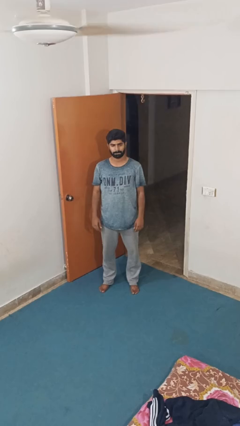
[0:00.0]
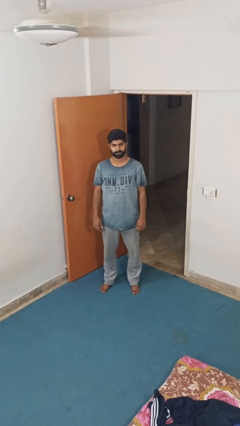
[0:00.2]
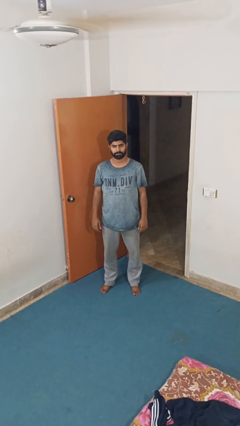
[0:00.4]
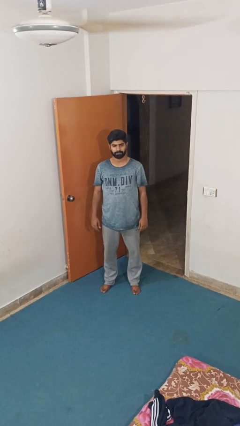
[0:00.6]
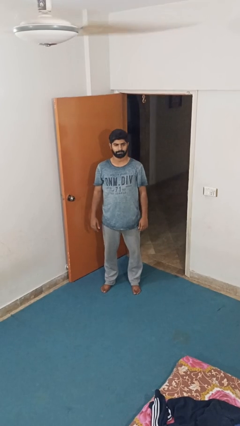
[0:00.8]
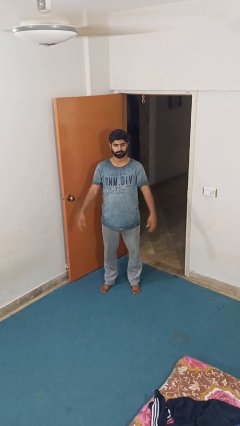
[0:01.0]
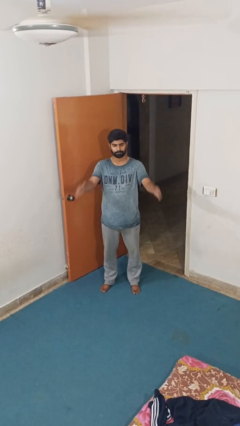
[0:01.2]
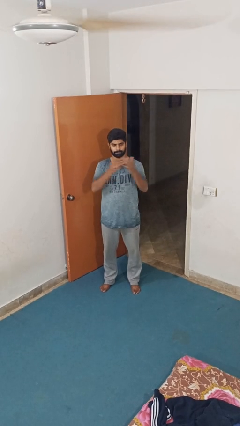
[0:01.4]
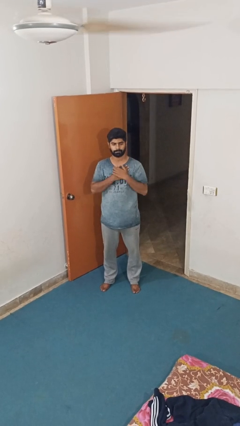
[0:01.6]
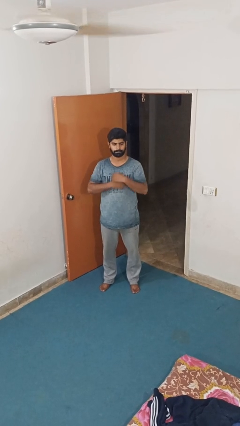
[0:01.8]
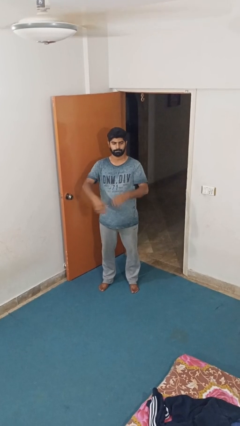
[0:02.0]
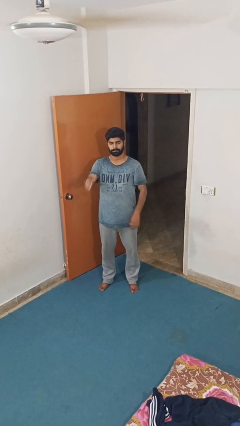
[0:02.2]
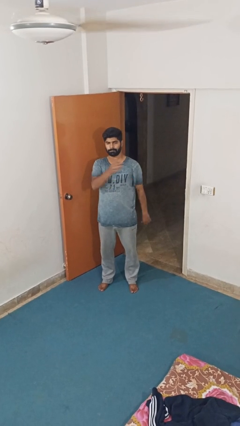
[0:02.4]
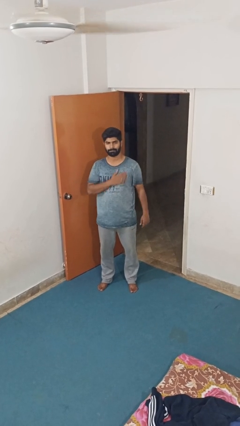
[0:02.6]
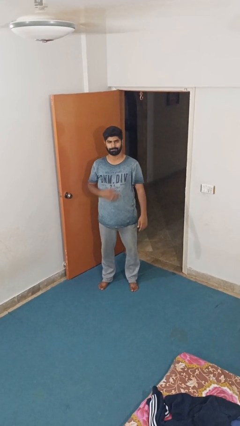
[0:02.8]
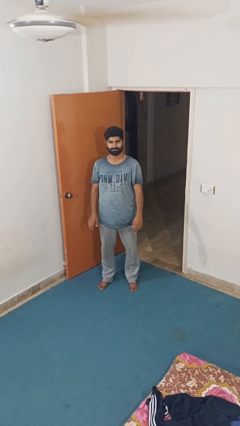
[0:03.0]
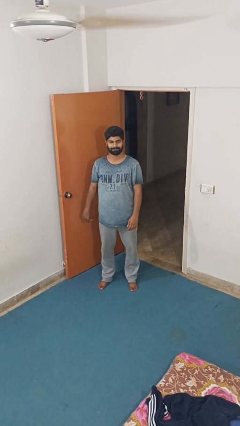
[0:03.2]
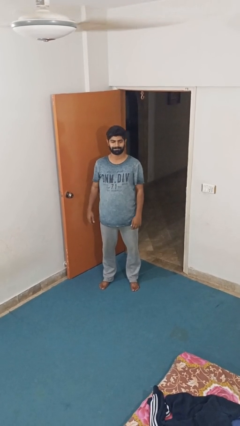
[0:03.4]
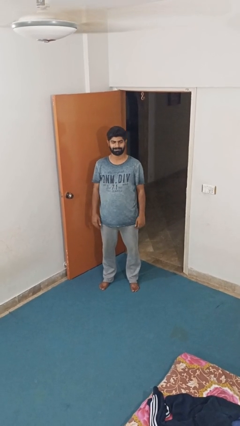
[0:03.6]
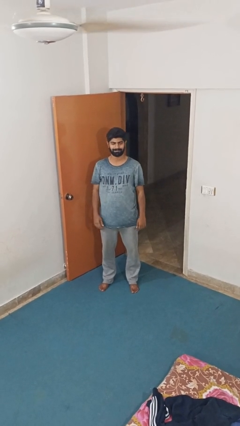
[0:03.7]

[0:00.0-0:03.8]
person drums on chest

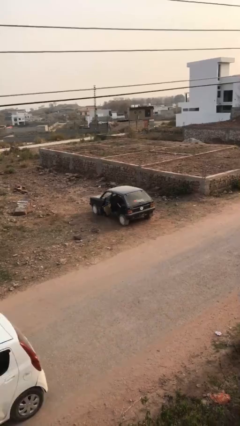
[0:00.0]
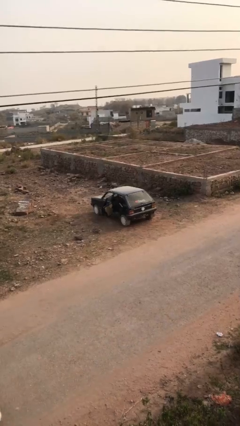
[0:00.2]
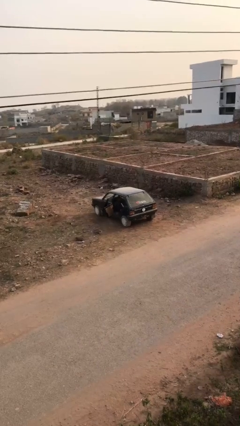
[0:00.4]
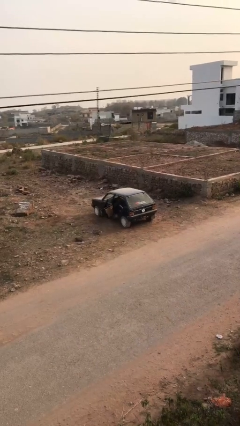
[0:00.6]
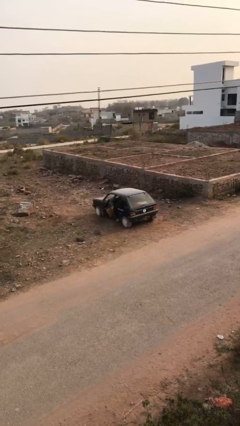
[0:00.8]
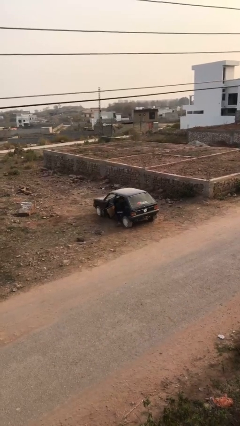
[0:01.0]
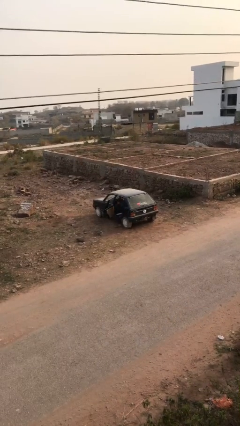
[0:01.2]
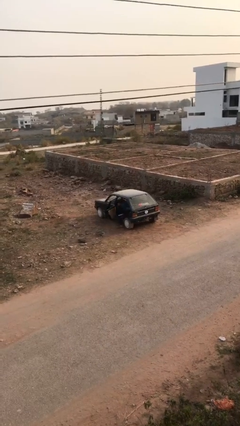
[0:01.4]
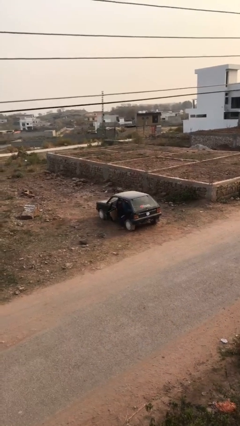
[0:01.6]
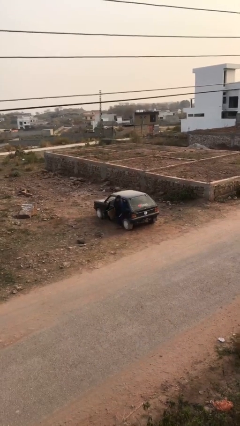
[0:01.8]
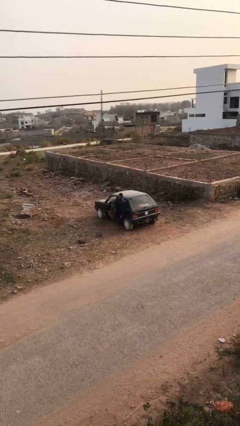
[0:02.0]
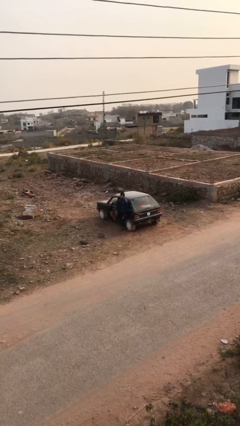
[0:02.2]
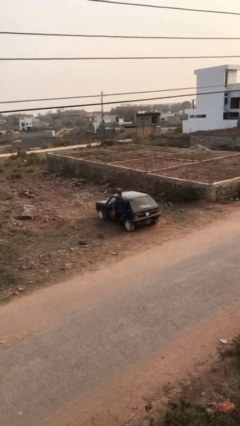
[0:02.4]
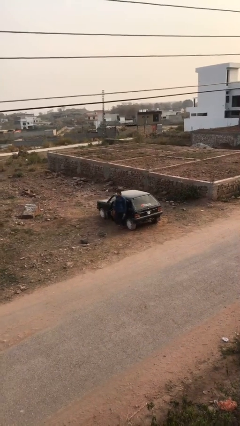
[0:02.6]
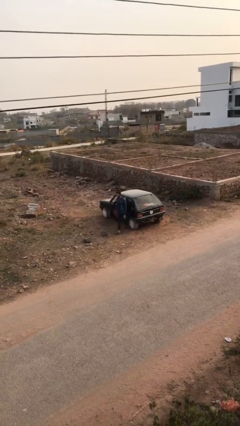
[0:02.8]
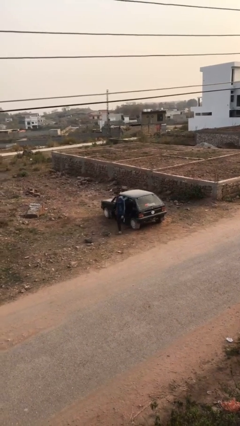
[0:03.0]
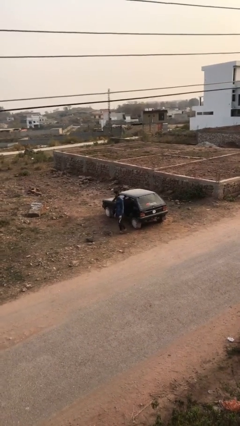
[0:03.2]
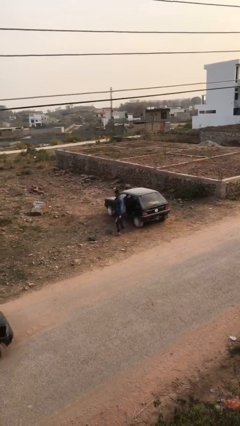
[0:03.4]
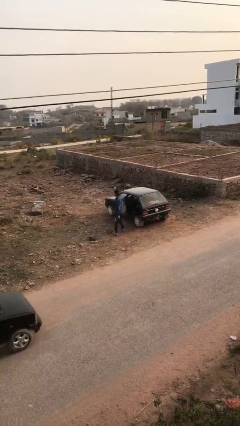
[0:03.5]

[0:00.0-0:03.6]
person exits car

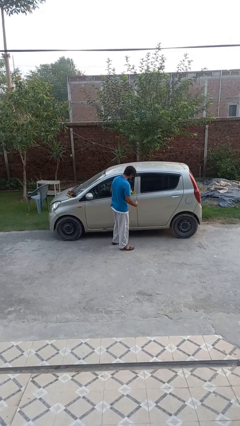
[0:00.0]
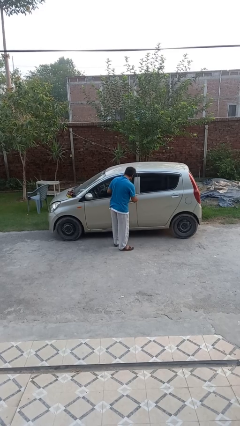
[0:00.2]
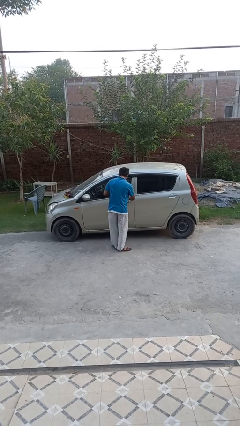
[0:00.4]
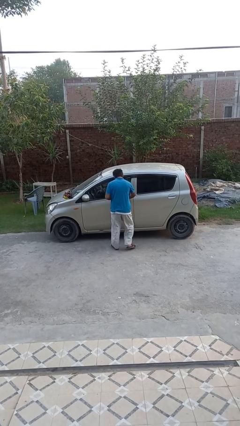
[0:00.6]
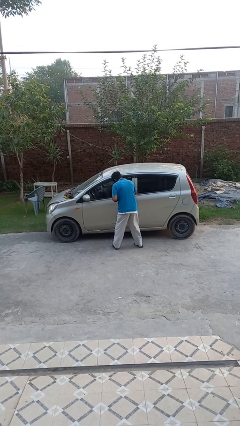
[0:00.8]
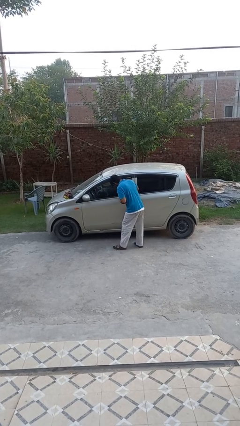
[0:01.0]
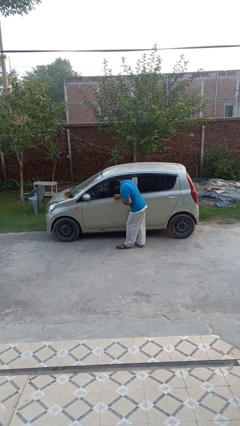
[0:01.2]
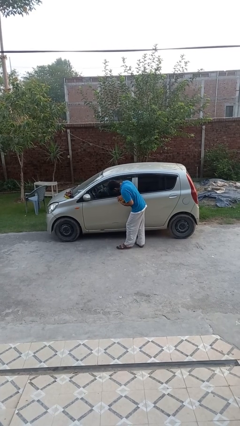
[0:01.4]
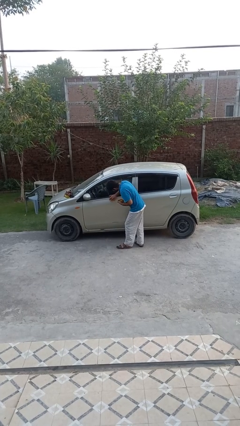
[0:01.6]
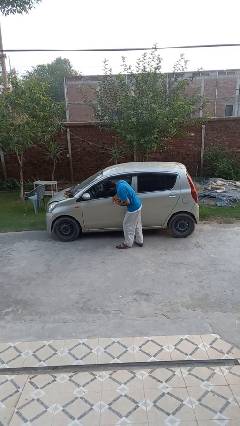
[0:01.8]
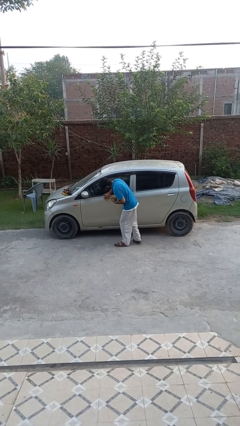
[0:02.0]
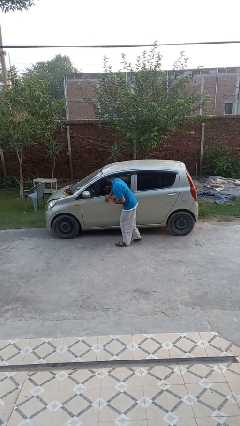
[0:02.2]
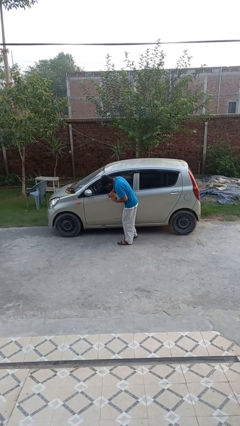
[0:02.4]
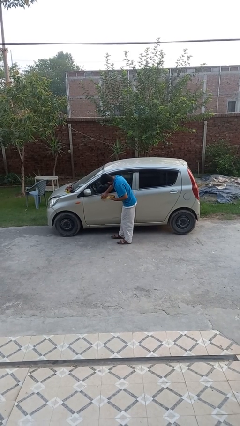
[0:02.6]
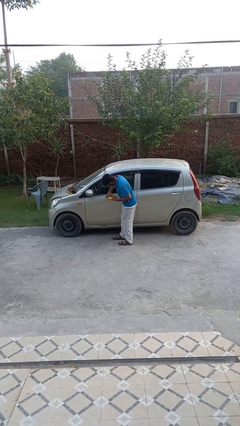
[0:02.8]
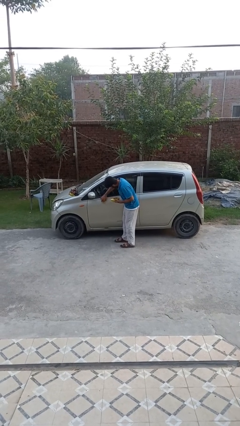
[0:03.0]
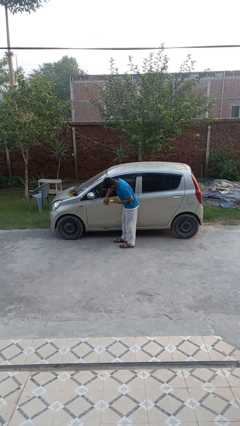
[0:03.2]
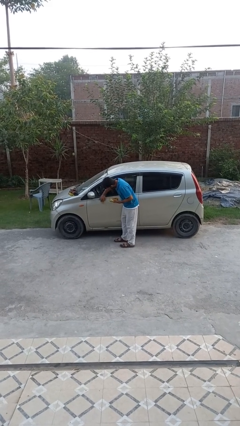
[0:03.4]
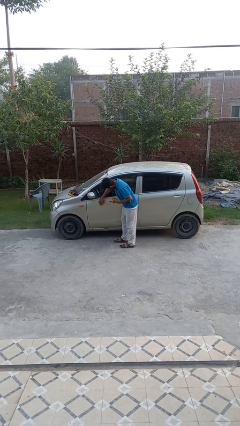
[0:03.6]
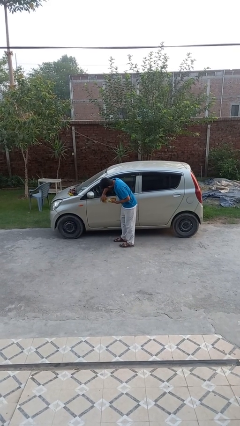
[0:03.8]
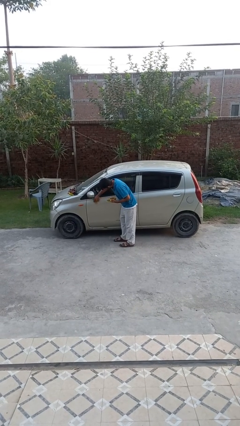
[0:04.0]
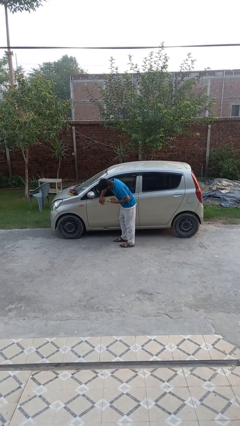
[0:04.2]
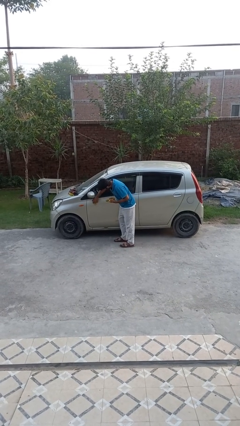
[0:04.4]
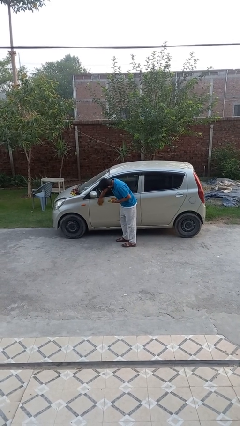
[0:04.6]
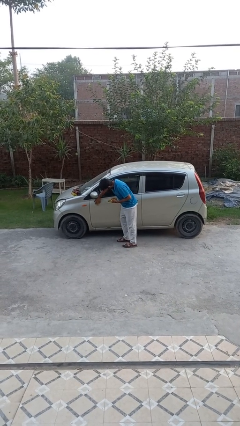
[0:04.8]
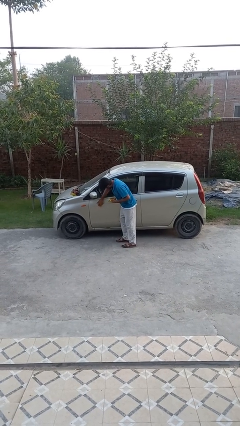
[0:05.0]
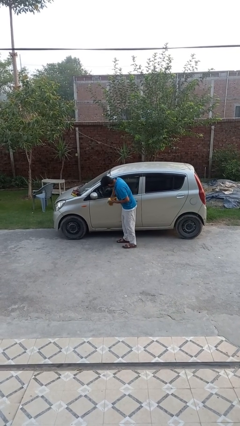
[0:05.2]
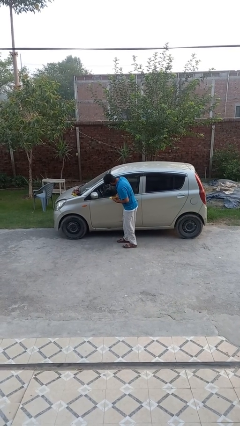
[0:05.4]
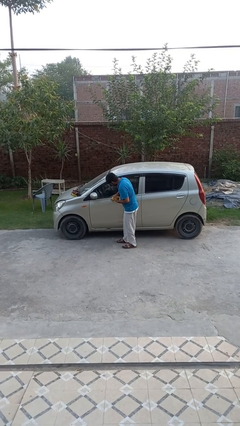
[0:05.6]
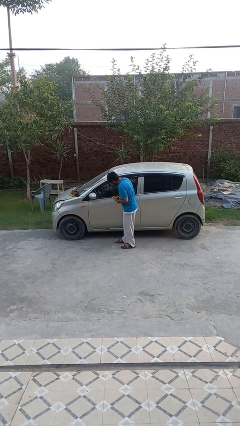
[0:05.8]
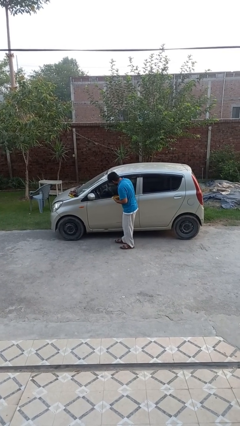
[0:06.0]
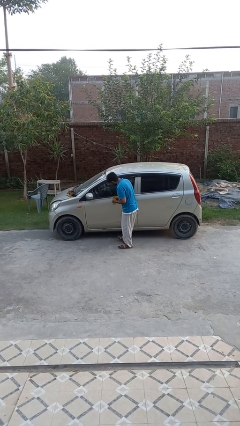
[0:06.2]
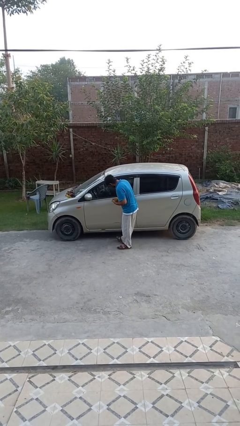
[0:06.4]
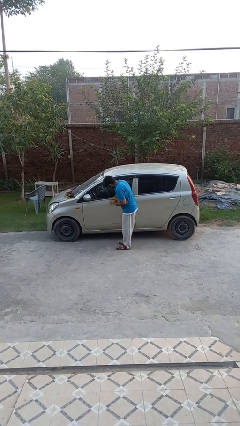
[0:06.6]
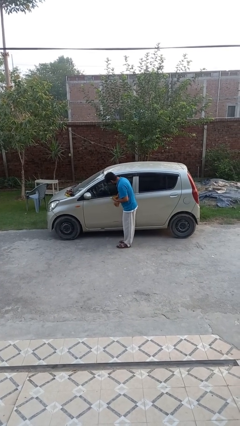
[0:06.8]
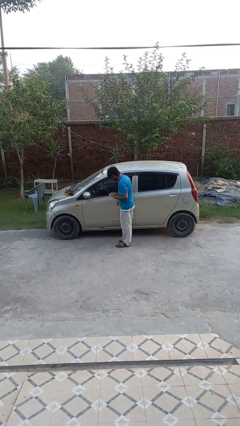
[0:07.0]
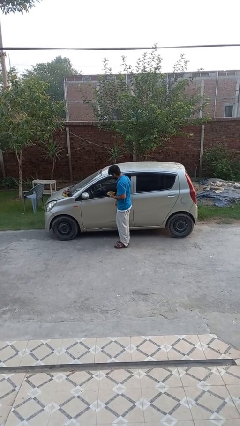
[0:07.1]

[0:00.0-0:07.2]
person polishes car with rag

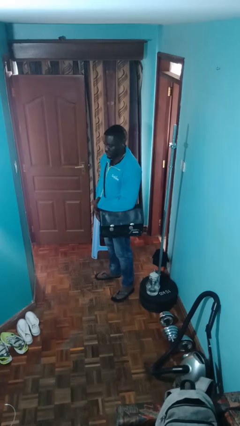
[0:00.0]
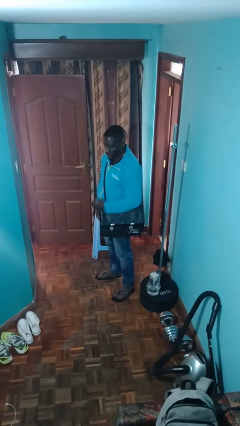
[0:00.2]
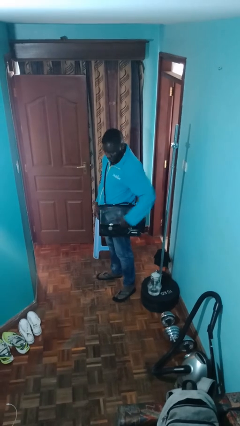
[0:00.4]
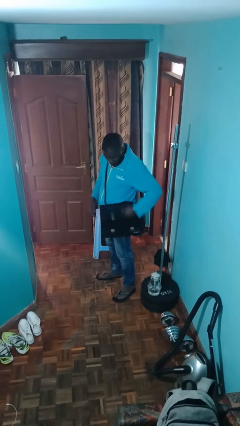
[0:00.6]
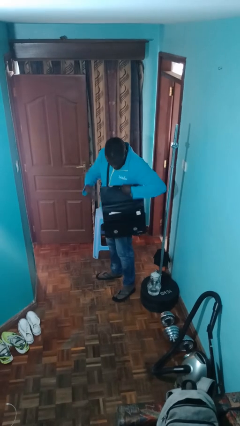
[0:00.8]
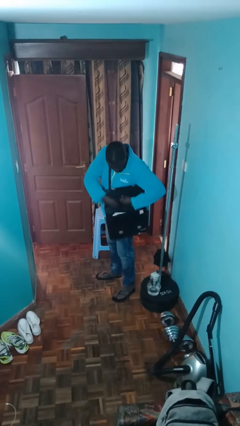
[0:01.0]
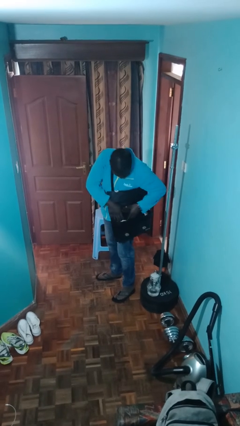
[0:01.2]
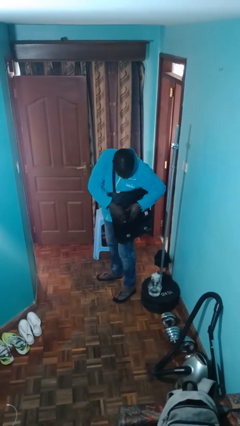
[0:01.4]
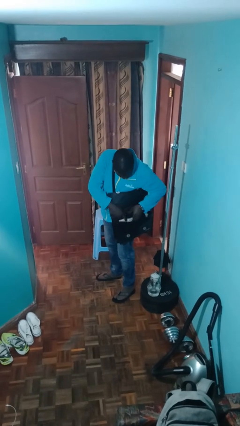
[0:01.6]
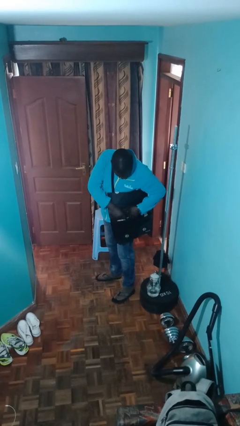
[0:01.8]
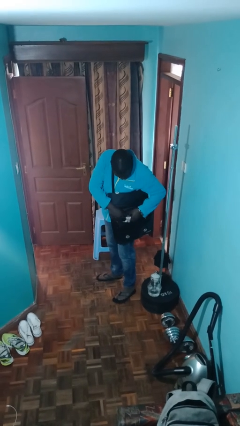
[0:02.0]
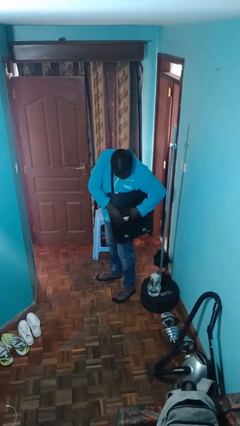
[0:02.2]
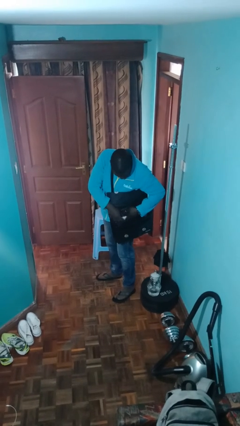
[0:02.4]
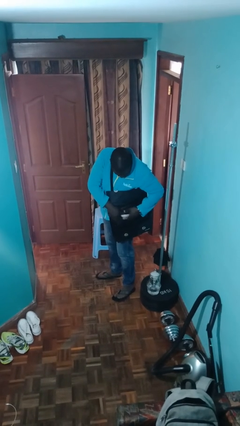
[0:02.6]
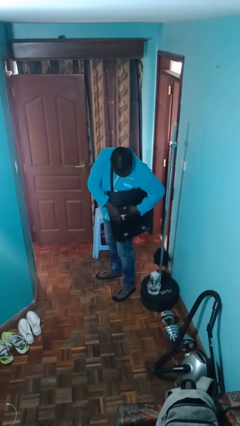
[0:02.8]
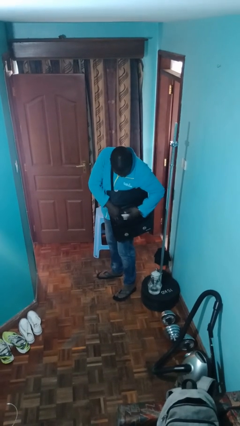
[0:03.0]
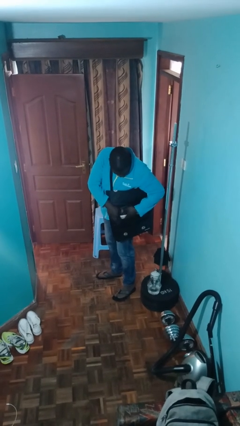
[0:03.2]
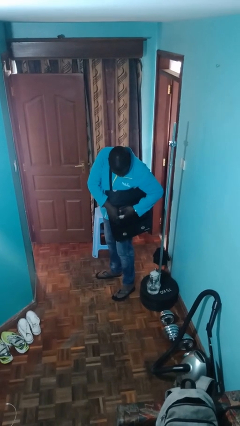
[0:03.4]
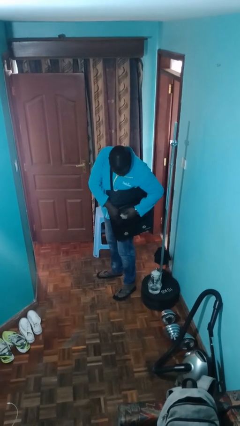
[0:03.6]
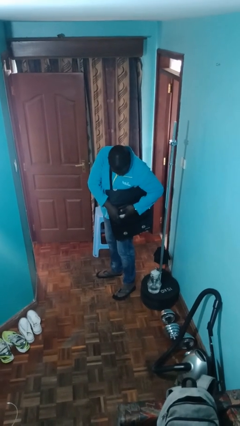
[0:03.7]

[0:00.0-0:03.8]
person searches in purse
